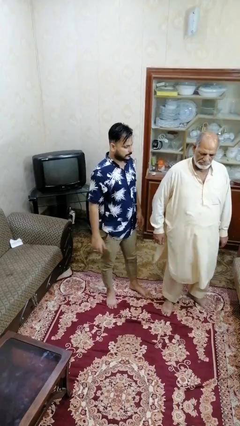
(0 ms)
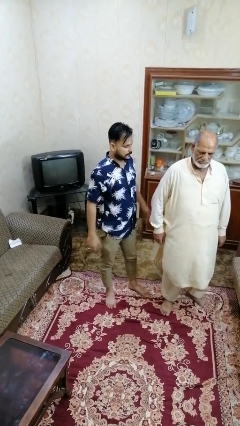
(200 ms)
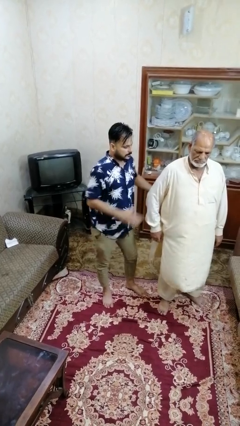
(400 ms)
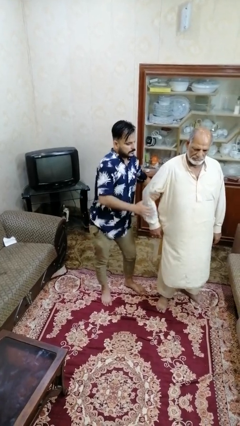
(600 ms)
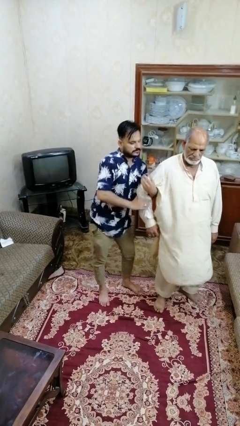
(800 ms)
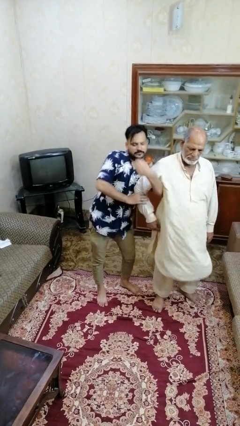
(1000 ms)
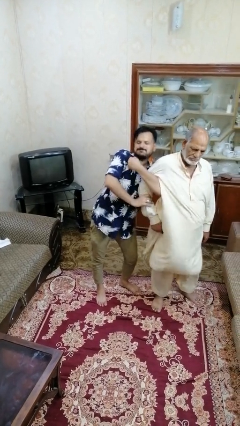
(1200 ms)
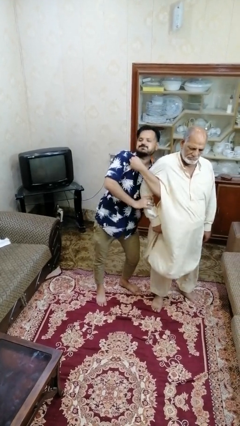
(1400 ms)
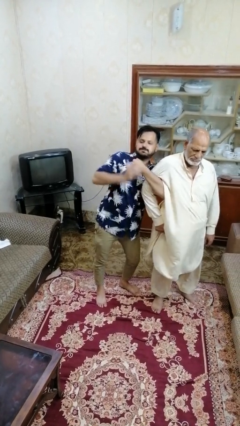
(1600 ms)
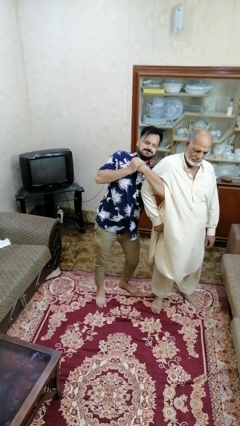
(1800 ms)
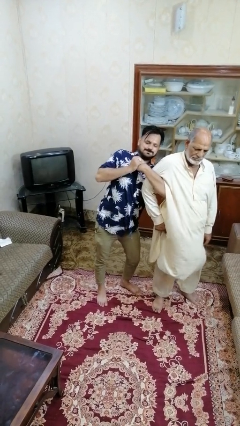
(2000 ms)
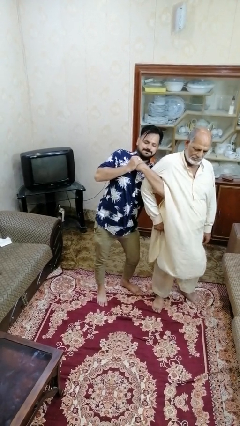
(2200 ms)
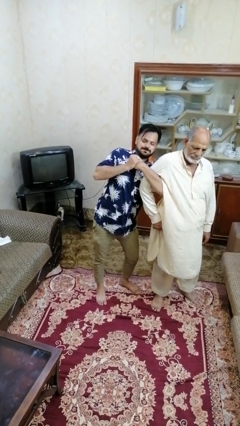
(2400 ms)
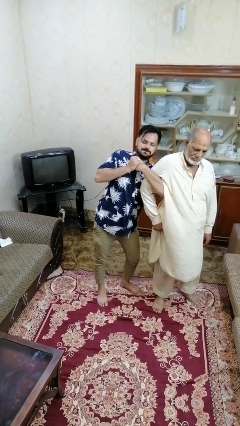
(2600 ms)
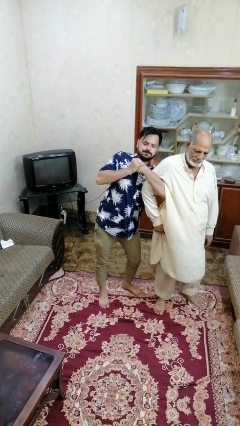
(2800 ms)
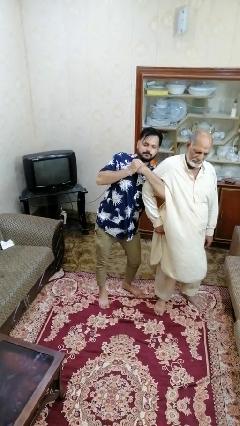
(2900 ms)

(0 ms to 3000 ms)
person grabs person by bicep

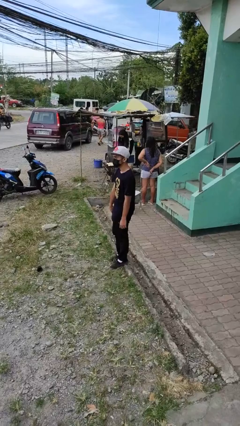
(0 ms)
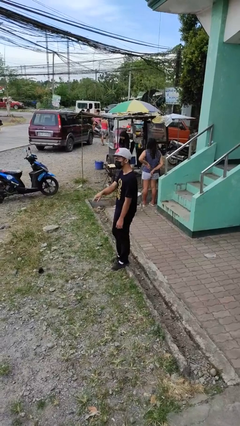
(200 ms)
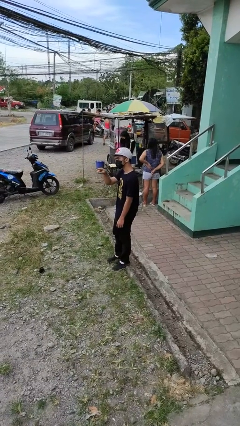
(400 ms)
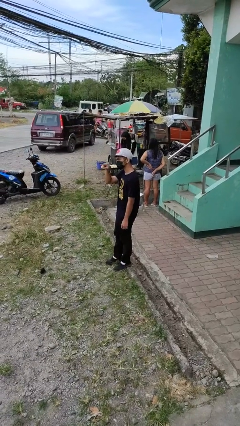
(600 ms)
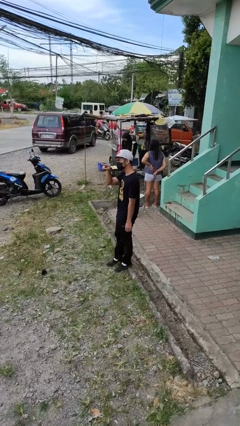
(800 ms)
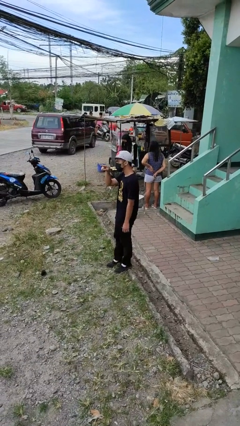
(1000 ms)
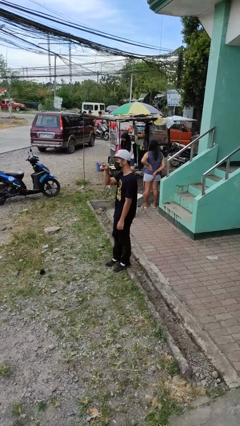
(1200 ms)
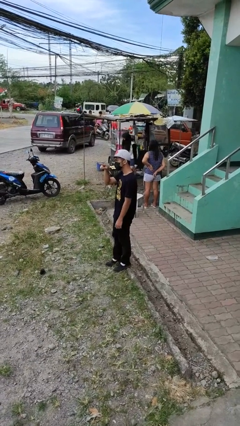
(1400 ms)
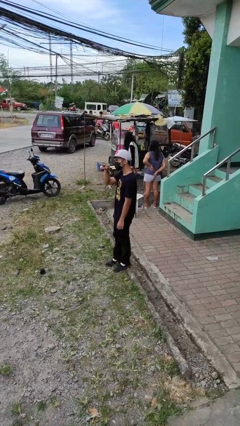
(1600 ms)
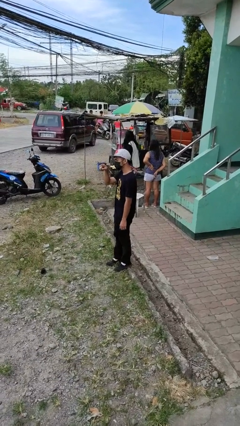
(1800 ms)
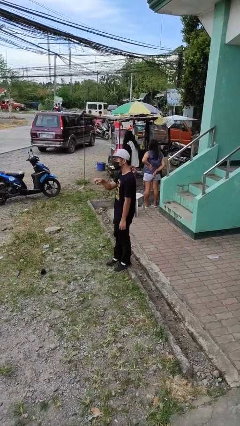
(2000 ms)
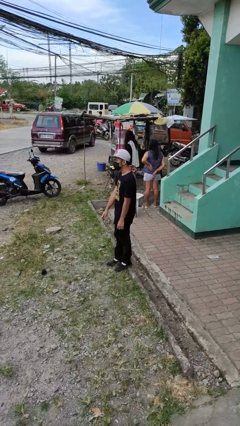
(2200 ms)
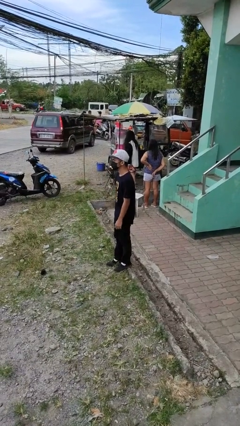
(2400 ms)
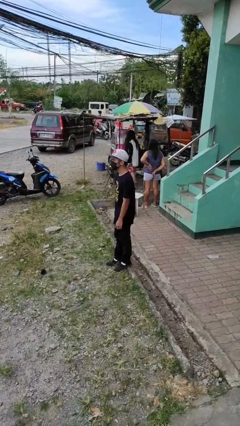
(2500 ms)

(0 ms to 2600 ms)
person points at person

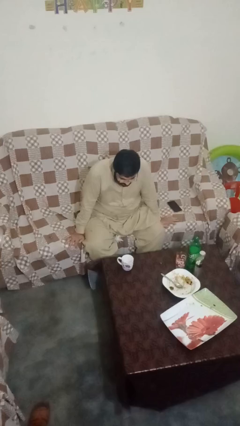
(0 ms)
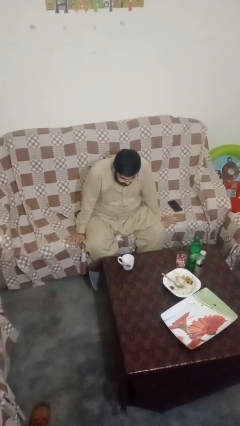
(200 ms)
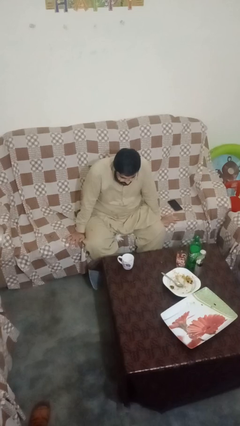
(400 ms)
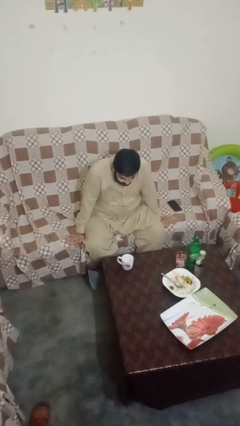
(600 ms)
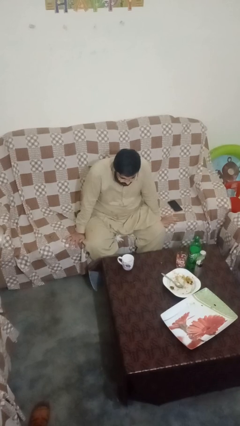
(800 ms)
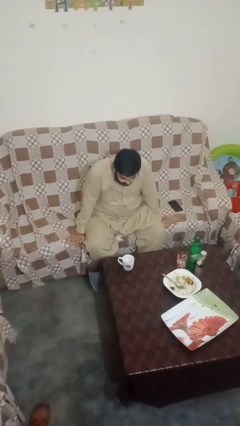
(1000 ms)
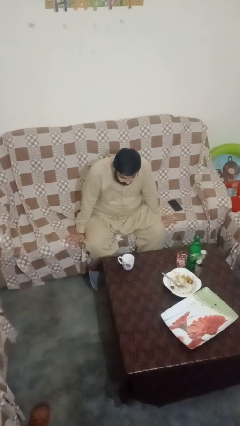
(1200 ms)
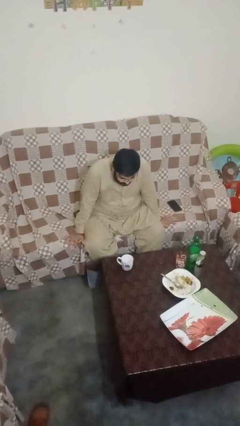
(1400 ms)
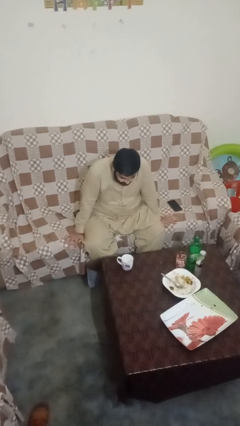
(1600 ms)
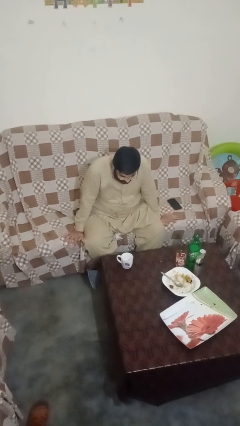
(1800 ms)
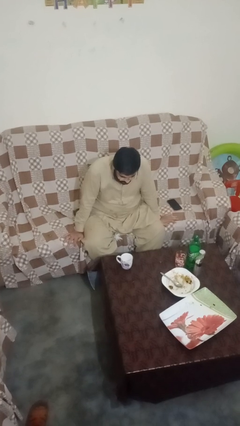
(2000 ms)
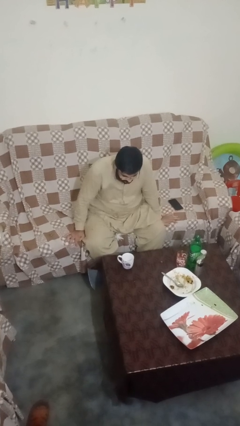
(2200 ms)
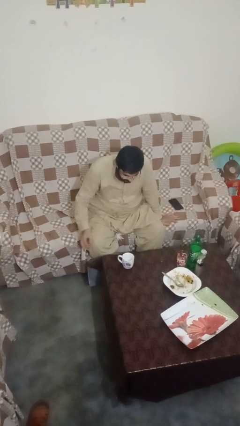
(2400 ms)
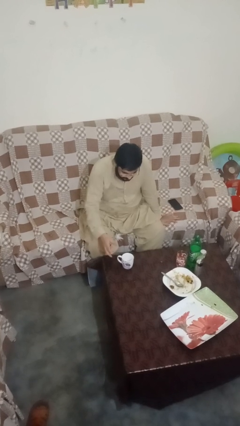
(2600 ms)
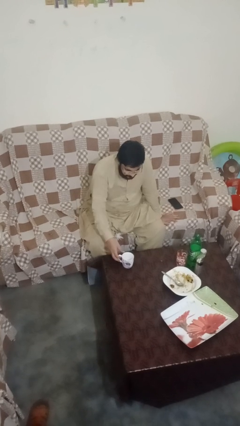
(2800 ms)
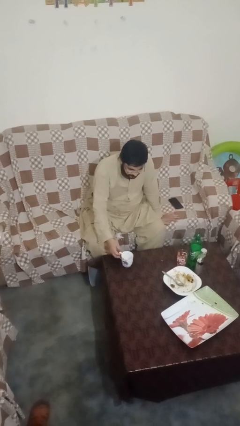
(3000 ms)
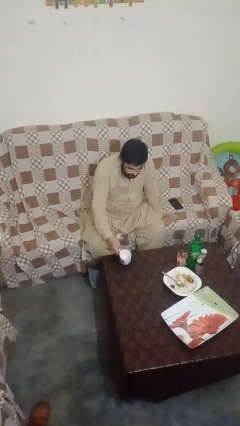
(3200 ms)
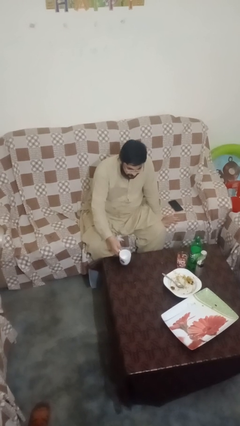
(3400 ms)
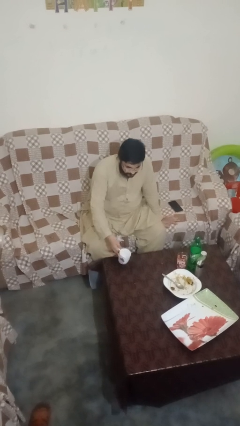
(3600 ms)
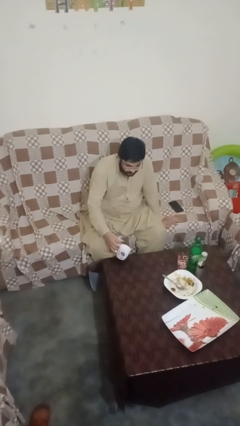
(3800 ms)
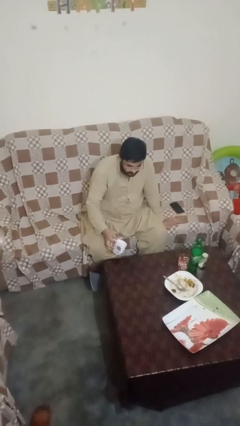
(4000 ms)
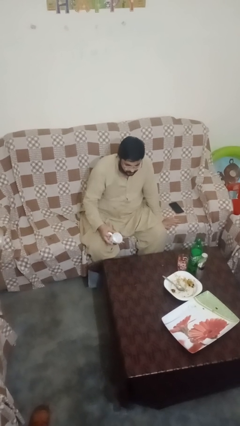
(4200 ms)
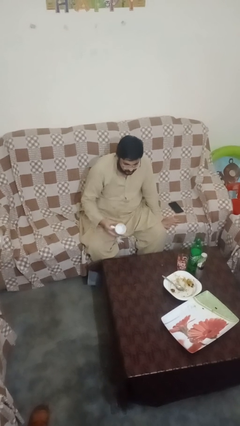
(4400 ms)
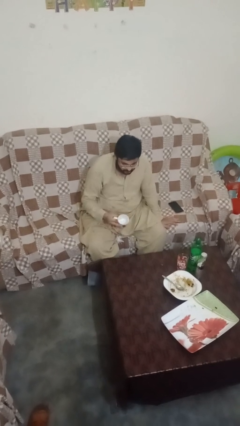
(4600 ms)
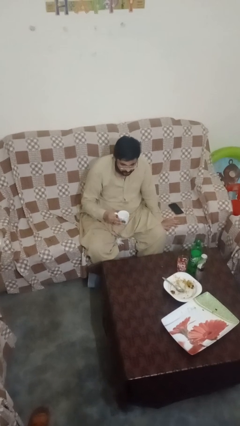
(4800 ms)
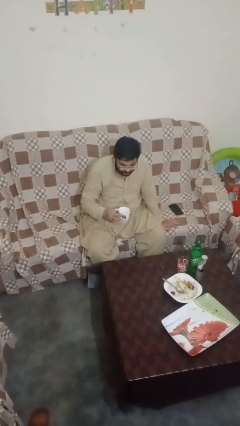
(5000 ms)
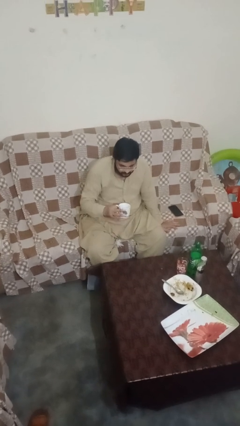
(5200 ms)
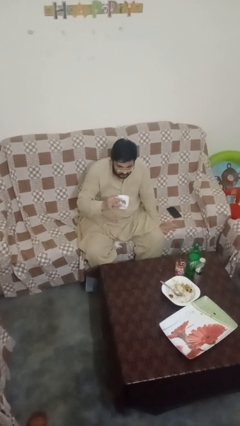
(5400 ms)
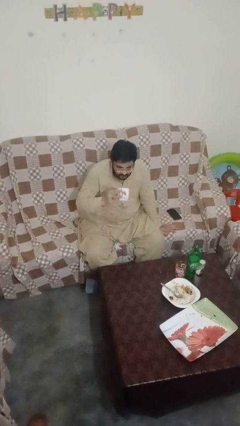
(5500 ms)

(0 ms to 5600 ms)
person picks up object from table

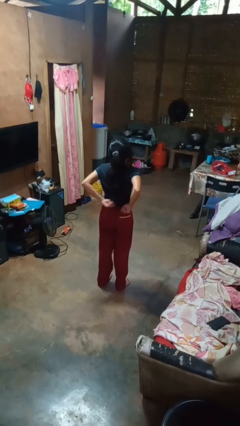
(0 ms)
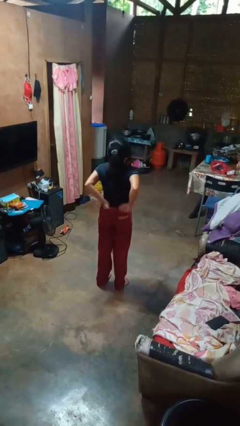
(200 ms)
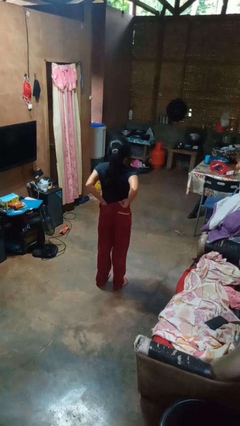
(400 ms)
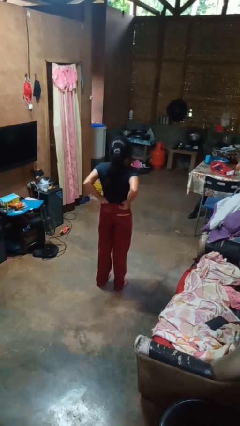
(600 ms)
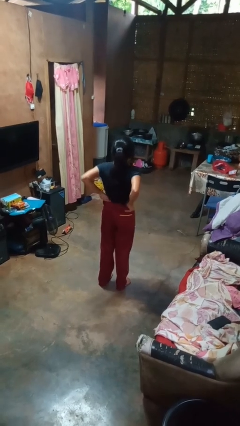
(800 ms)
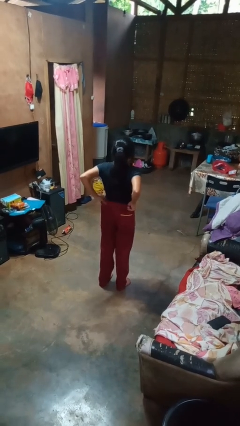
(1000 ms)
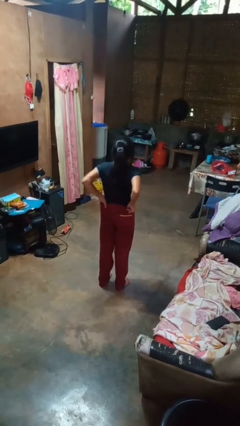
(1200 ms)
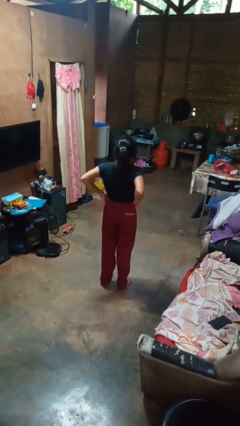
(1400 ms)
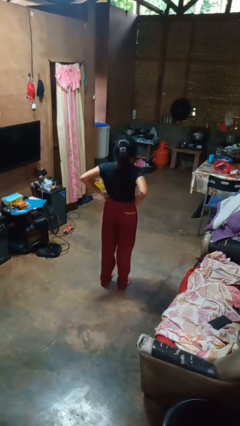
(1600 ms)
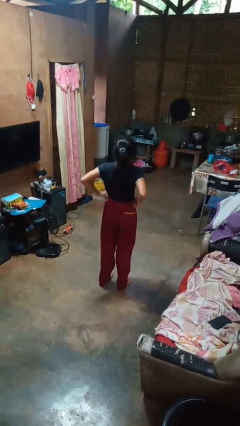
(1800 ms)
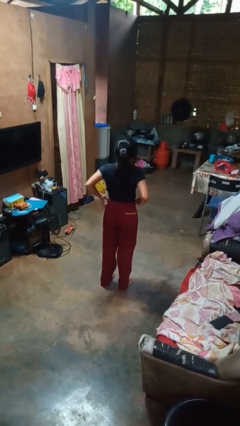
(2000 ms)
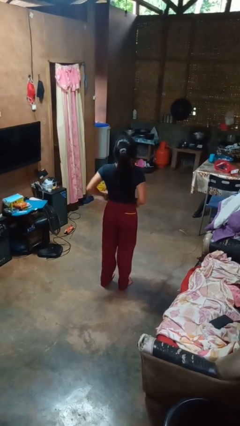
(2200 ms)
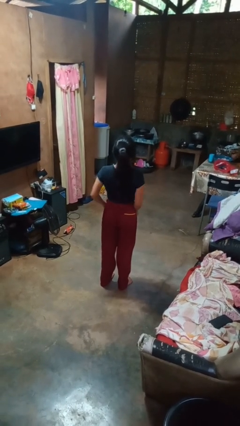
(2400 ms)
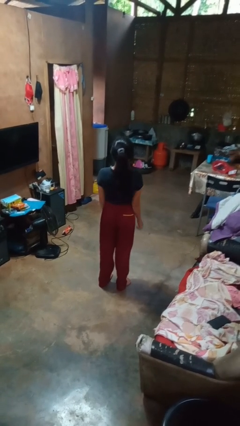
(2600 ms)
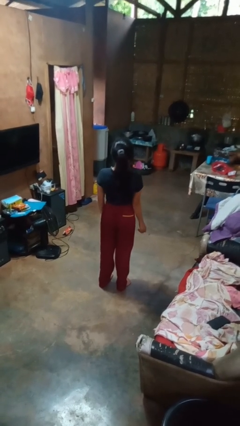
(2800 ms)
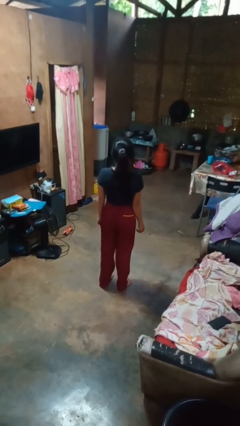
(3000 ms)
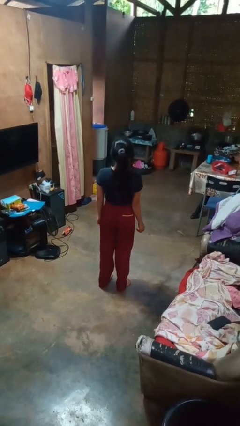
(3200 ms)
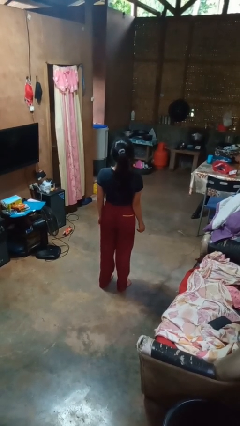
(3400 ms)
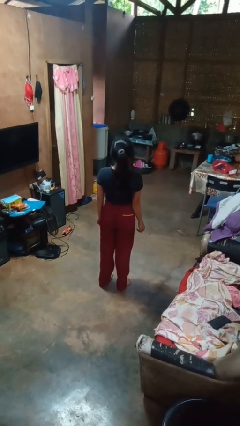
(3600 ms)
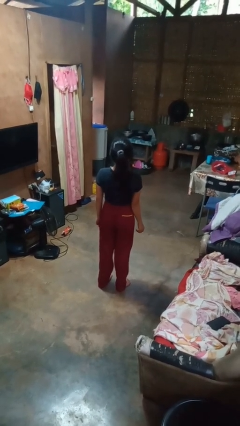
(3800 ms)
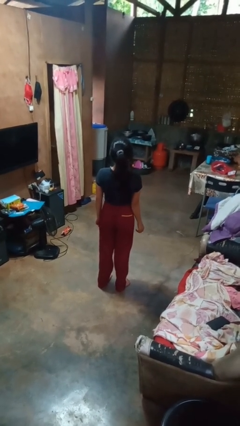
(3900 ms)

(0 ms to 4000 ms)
person tucks in shirt

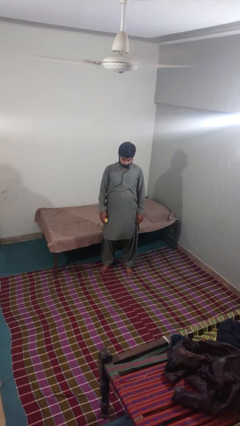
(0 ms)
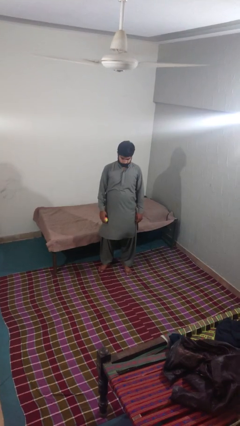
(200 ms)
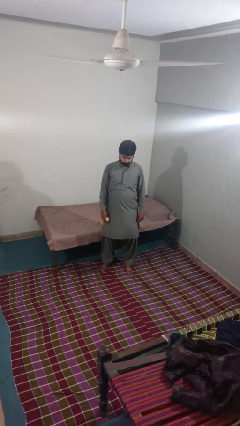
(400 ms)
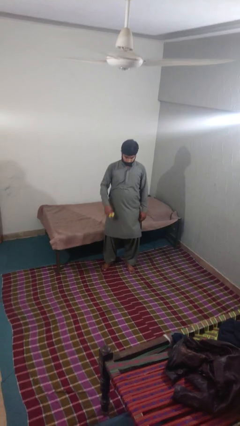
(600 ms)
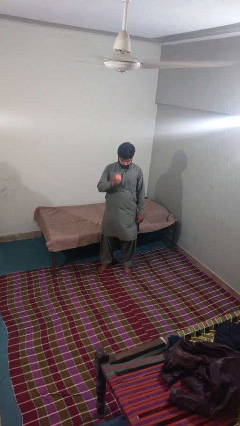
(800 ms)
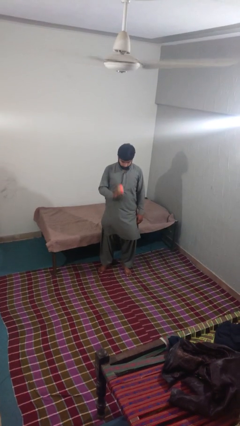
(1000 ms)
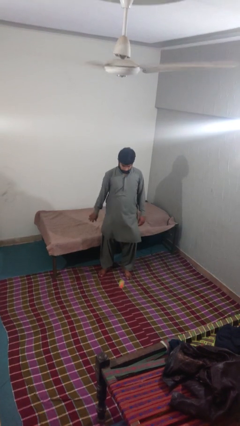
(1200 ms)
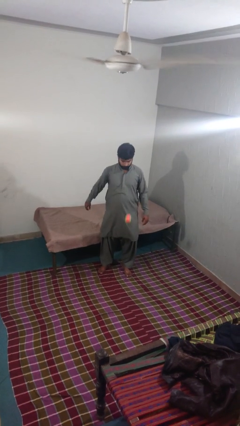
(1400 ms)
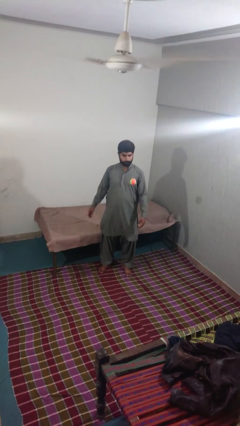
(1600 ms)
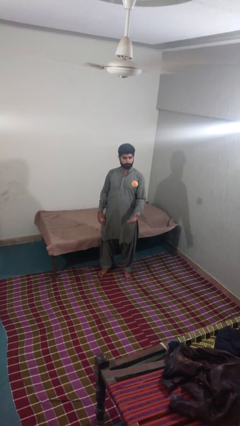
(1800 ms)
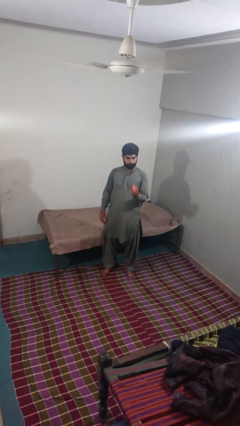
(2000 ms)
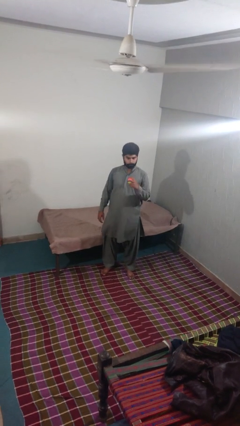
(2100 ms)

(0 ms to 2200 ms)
person bounces ball on floor

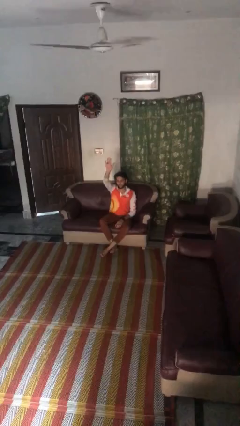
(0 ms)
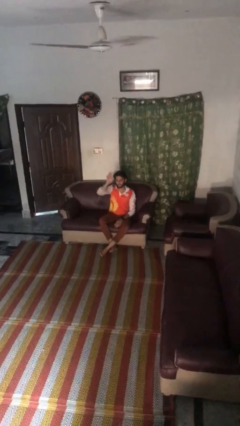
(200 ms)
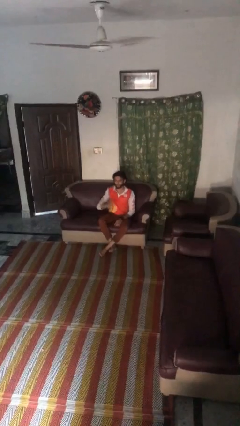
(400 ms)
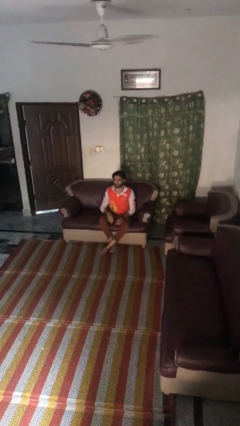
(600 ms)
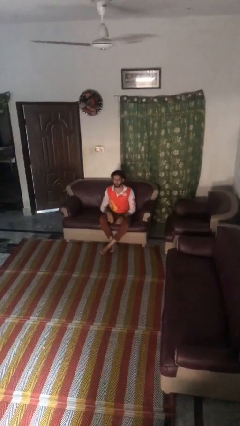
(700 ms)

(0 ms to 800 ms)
person gestures lower hand
